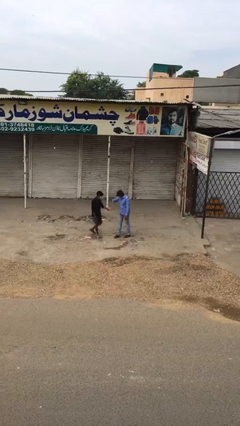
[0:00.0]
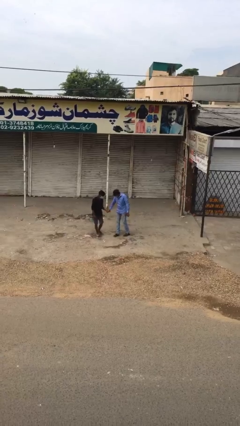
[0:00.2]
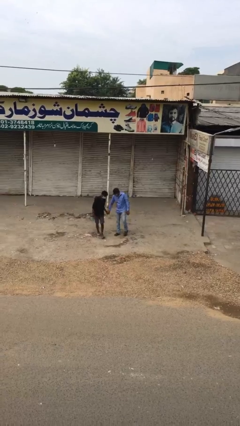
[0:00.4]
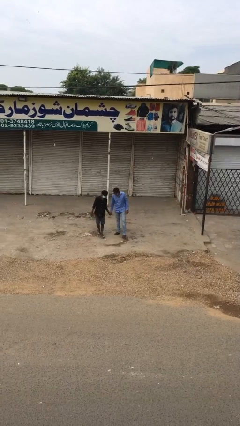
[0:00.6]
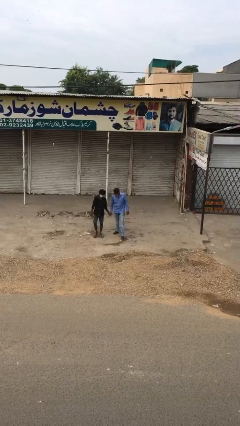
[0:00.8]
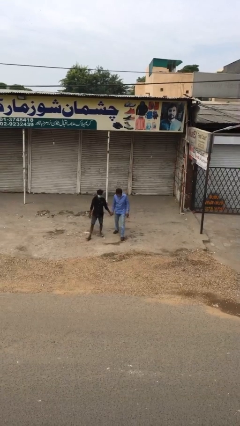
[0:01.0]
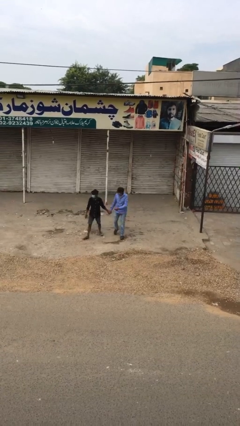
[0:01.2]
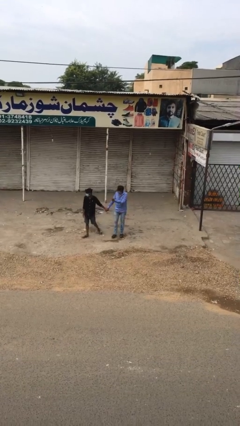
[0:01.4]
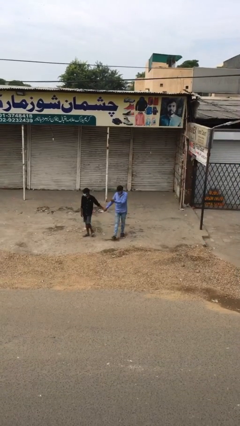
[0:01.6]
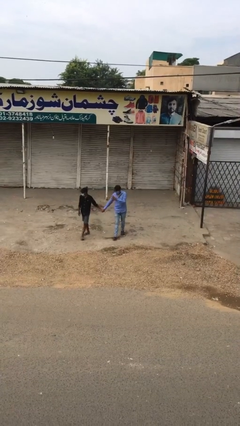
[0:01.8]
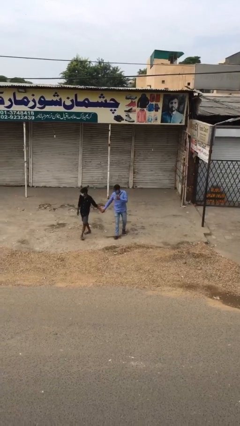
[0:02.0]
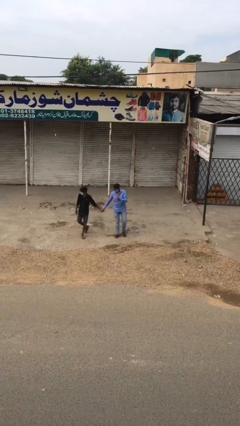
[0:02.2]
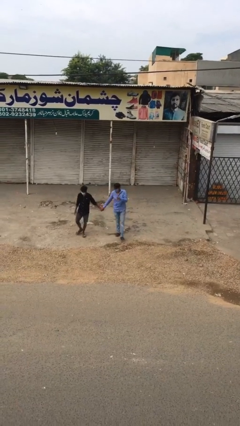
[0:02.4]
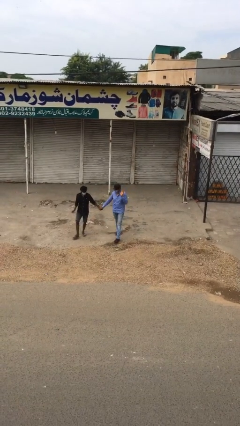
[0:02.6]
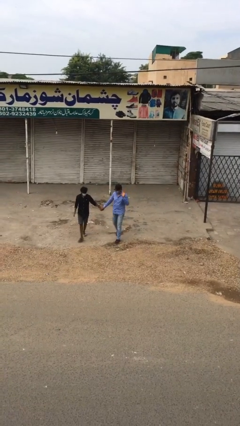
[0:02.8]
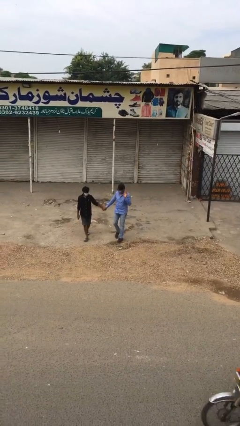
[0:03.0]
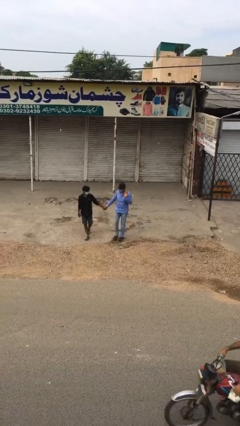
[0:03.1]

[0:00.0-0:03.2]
person holds hand

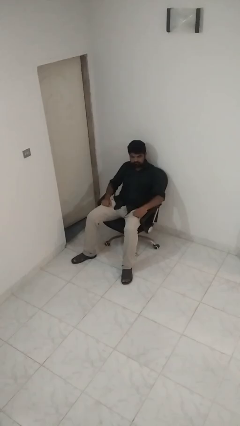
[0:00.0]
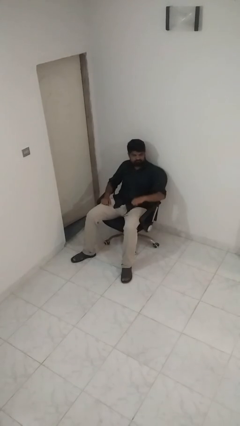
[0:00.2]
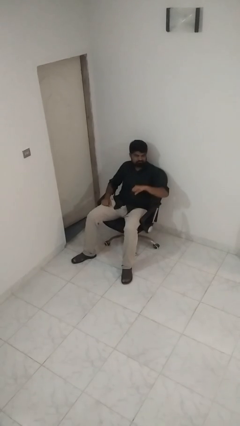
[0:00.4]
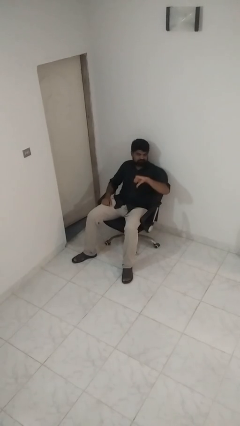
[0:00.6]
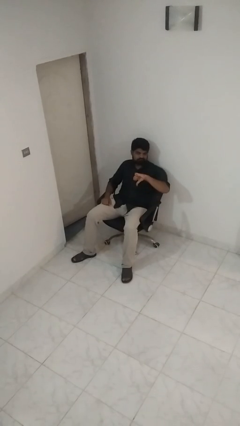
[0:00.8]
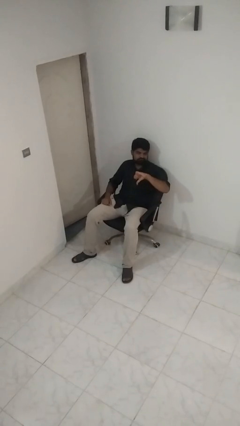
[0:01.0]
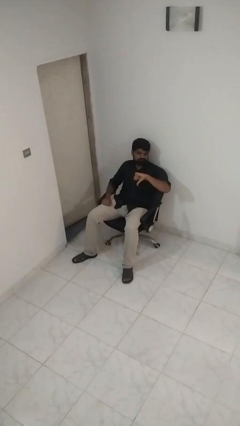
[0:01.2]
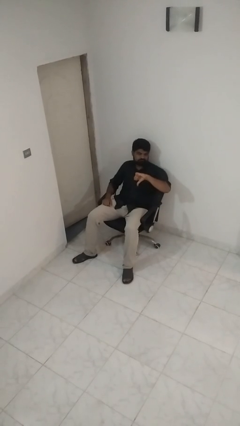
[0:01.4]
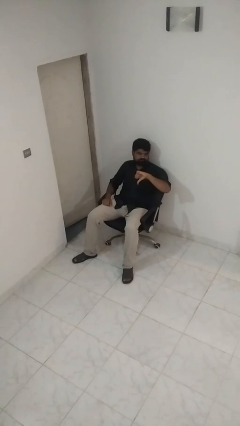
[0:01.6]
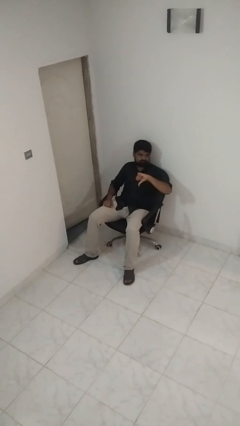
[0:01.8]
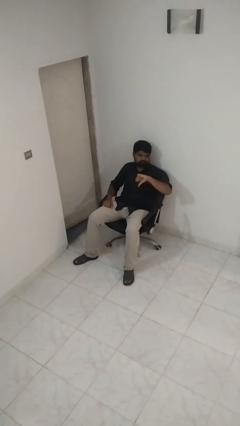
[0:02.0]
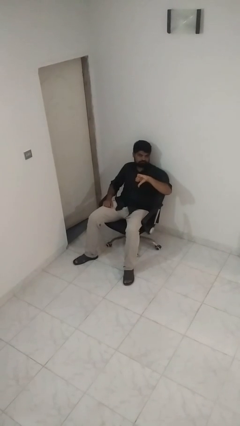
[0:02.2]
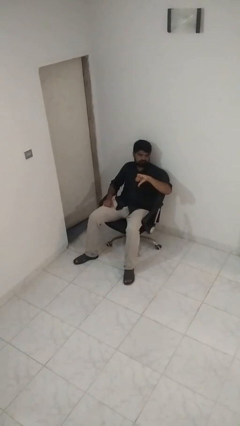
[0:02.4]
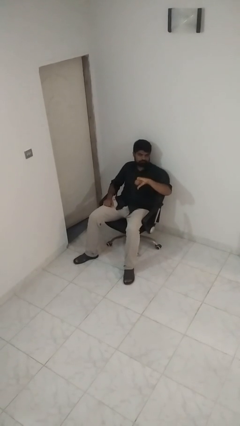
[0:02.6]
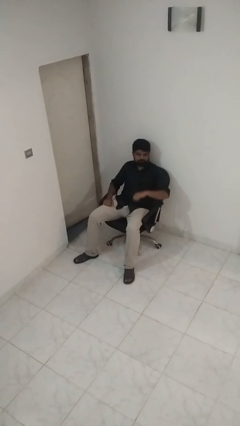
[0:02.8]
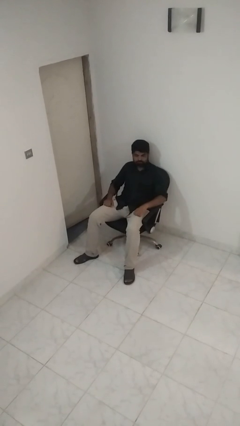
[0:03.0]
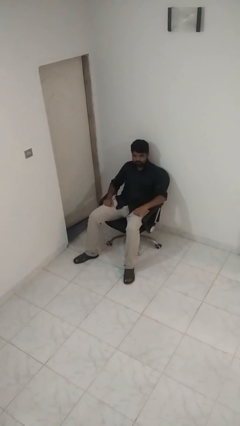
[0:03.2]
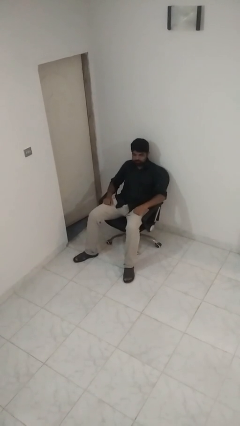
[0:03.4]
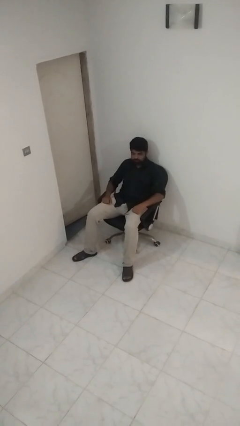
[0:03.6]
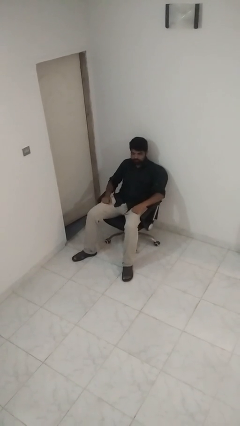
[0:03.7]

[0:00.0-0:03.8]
person gestures thumbs down

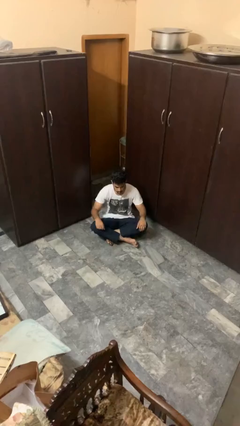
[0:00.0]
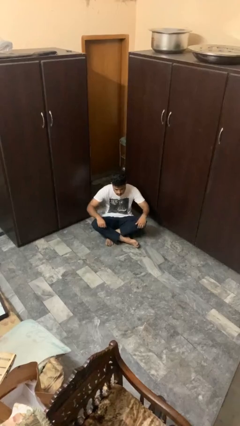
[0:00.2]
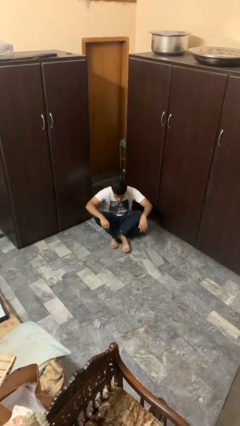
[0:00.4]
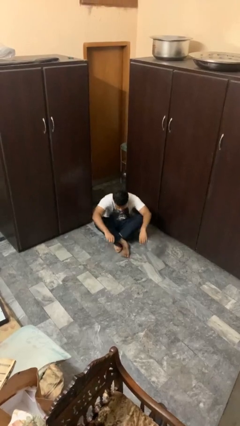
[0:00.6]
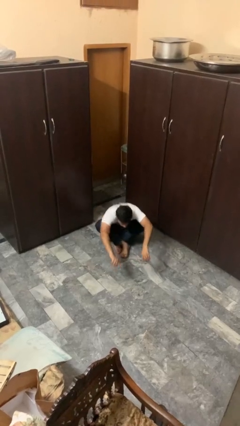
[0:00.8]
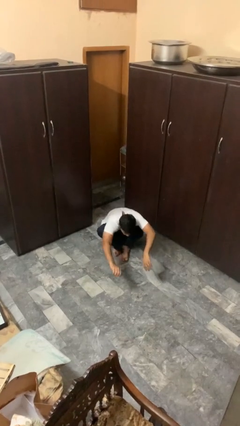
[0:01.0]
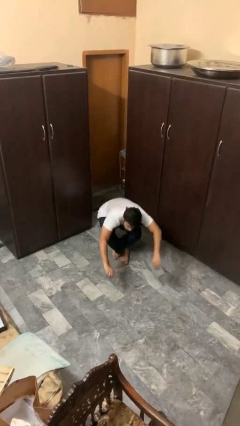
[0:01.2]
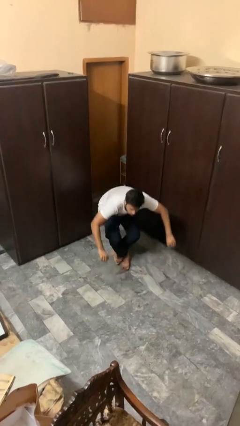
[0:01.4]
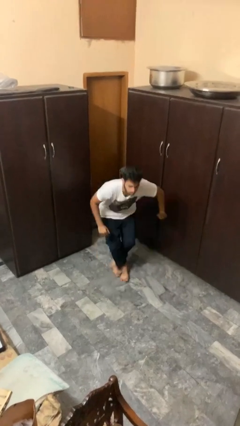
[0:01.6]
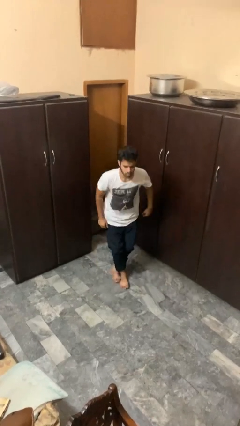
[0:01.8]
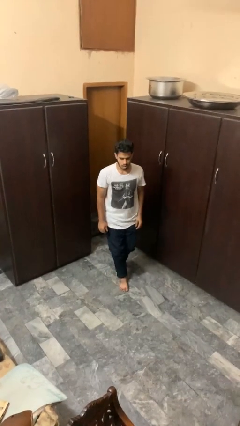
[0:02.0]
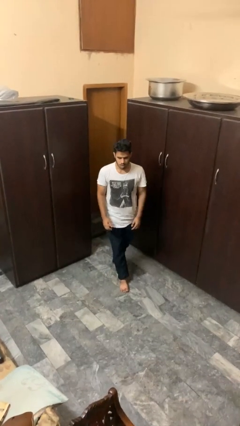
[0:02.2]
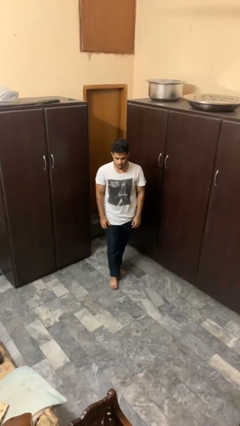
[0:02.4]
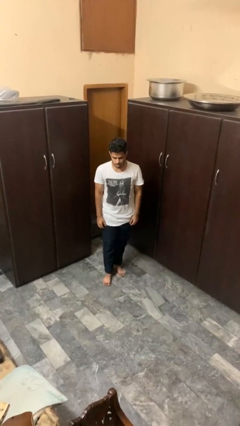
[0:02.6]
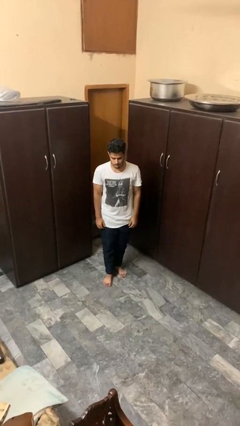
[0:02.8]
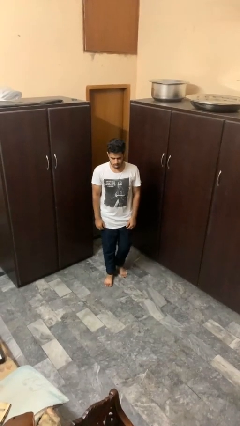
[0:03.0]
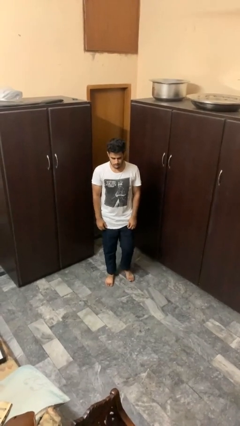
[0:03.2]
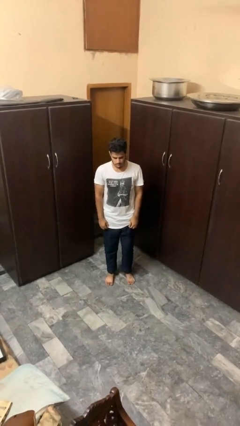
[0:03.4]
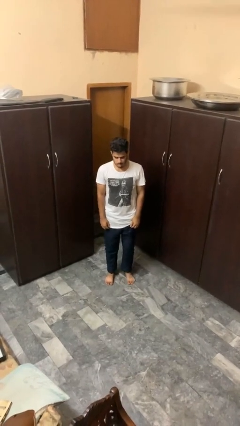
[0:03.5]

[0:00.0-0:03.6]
person stands up from floor

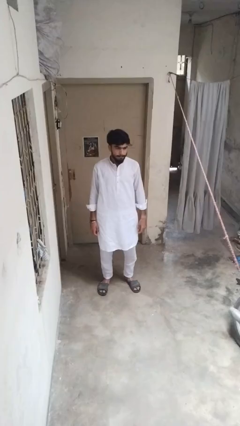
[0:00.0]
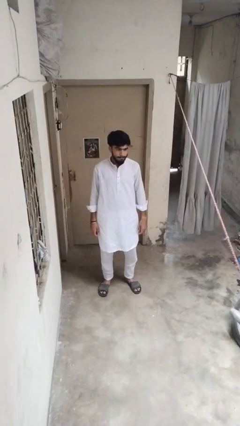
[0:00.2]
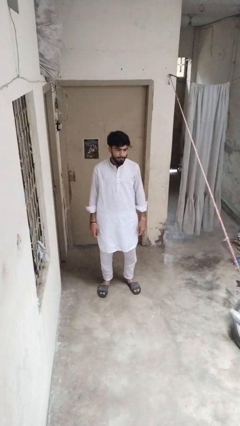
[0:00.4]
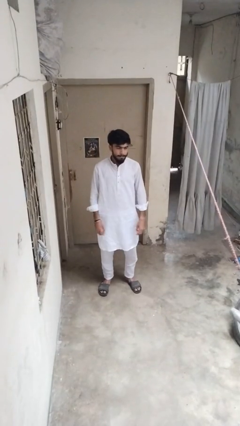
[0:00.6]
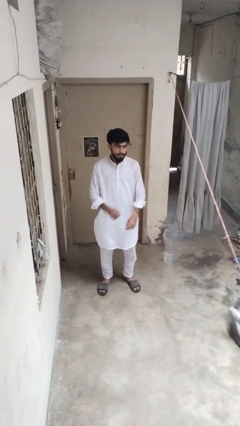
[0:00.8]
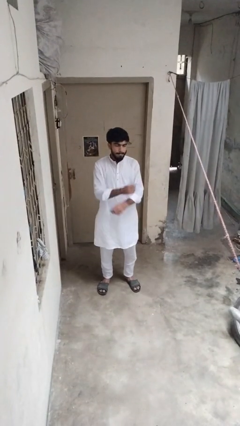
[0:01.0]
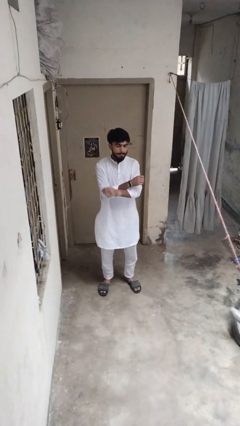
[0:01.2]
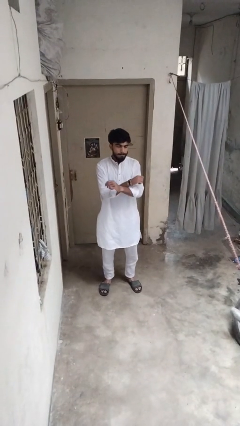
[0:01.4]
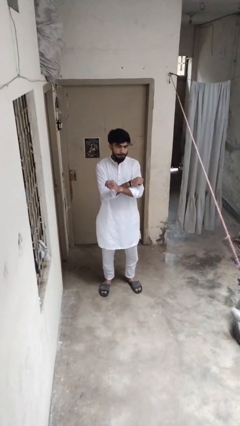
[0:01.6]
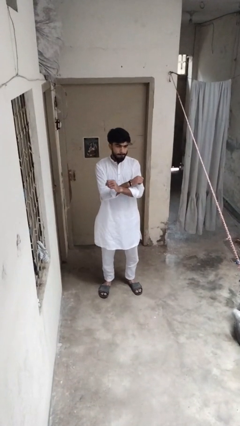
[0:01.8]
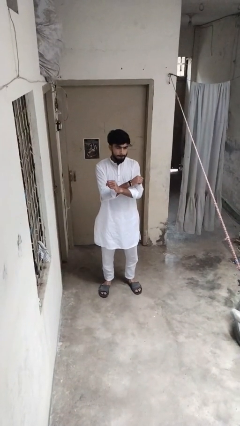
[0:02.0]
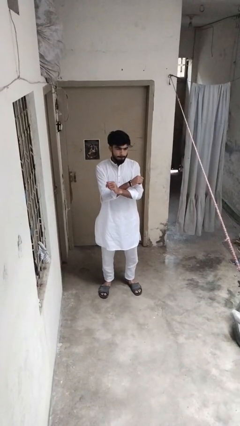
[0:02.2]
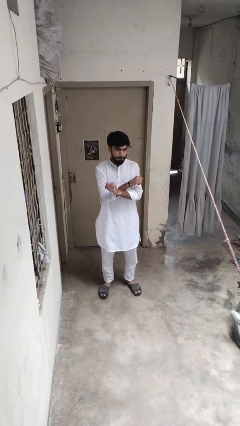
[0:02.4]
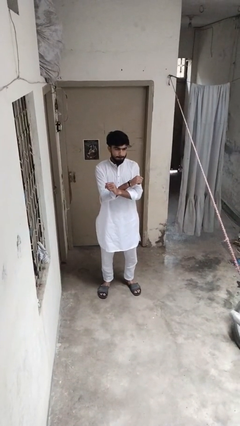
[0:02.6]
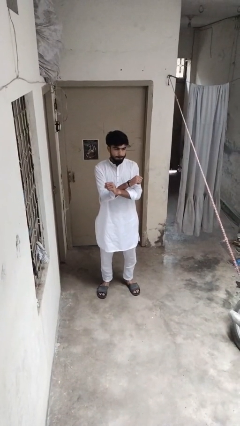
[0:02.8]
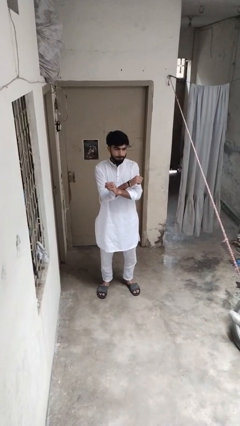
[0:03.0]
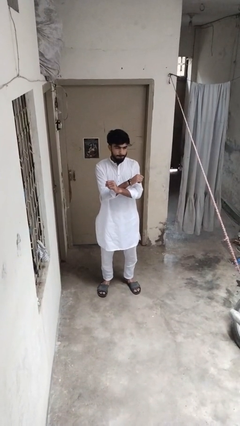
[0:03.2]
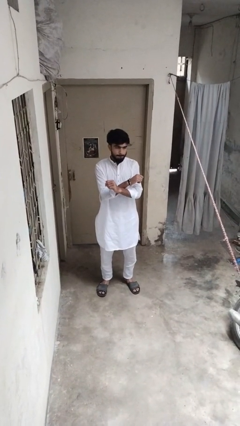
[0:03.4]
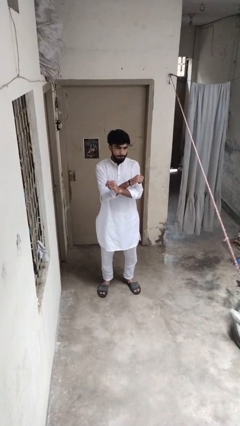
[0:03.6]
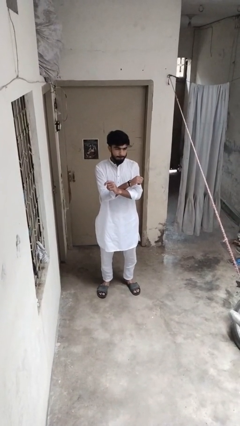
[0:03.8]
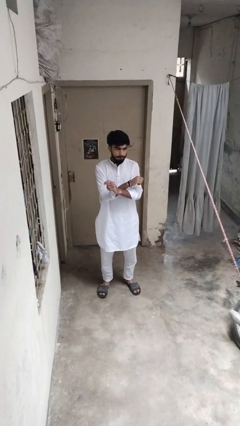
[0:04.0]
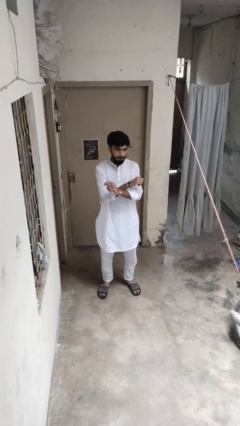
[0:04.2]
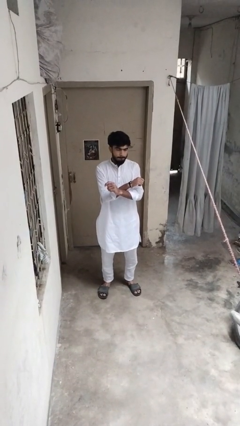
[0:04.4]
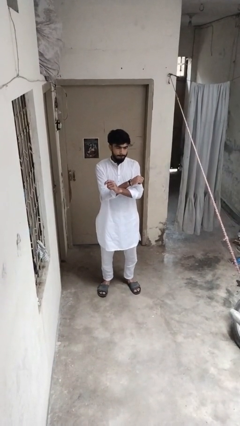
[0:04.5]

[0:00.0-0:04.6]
person gestures arms x

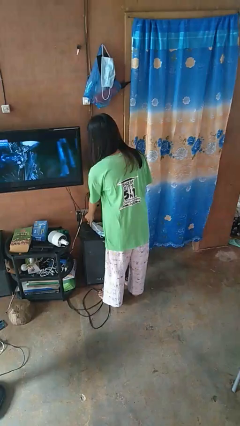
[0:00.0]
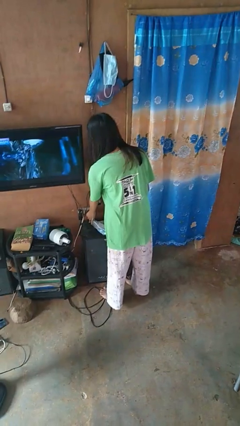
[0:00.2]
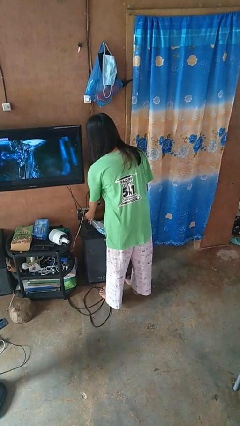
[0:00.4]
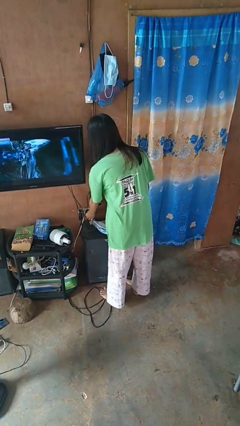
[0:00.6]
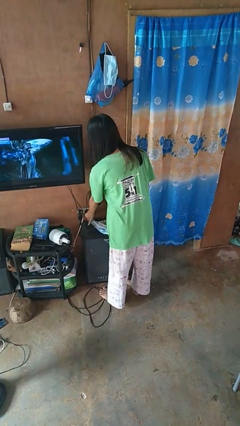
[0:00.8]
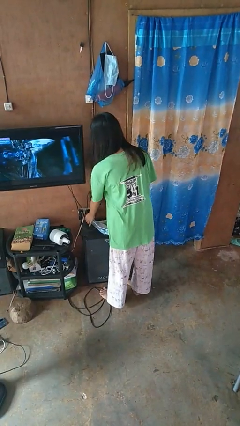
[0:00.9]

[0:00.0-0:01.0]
person plugs into electrical socket

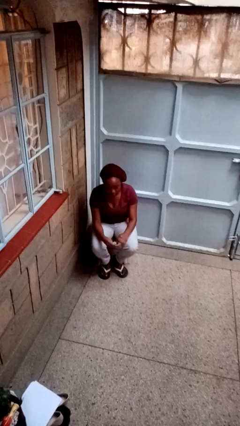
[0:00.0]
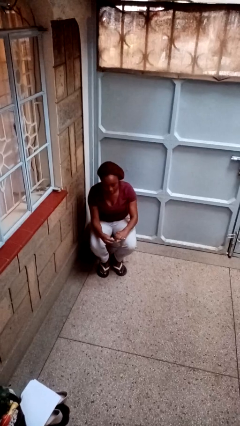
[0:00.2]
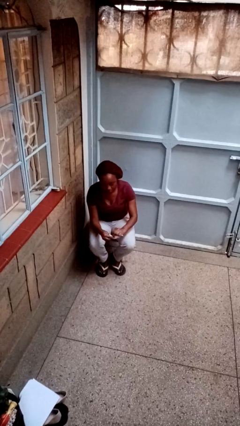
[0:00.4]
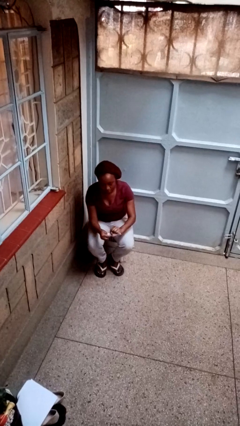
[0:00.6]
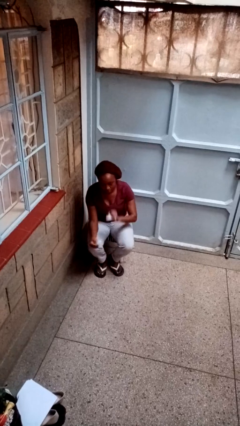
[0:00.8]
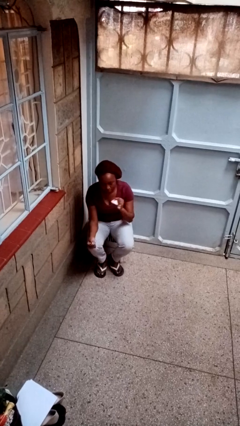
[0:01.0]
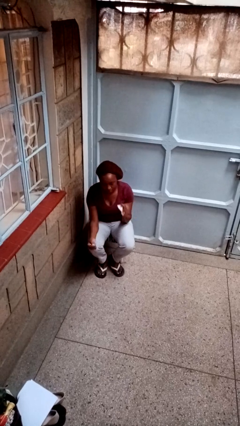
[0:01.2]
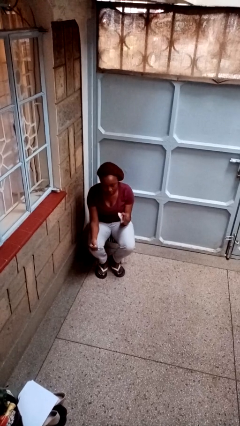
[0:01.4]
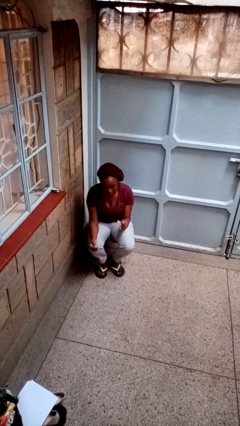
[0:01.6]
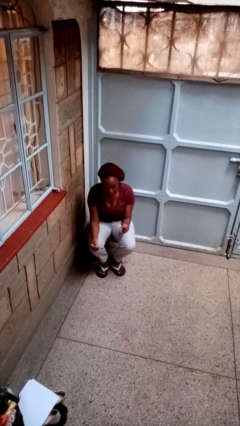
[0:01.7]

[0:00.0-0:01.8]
person tears paper
